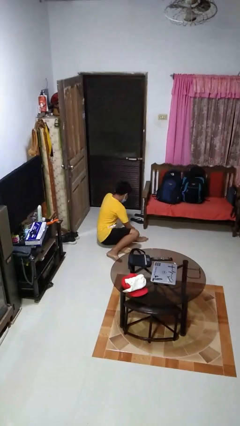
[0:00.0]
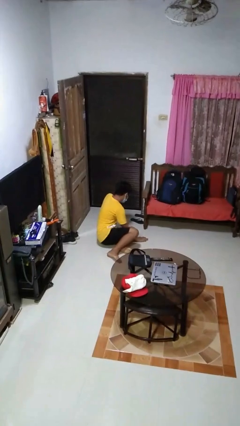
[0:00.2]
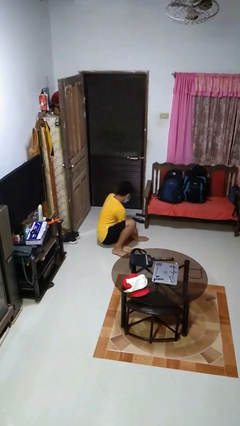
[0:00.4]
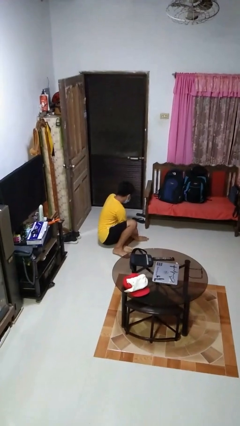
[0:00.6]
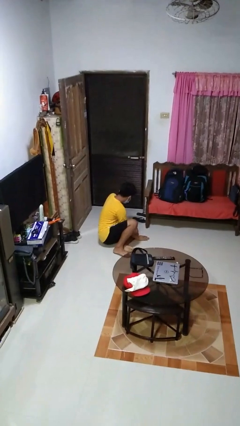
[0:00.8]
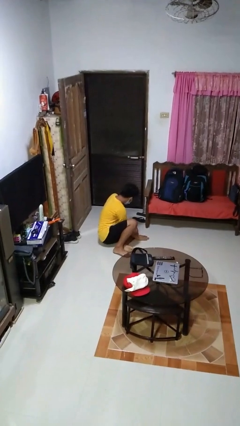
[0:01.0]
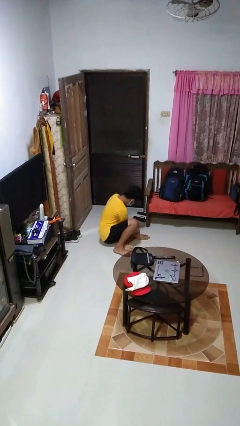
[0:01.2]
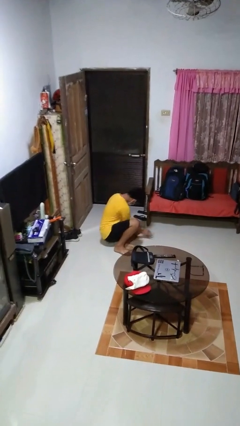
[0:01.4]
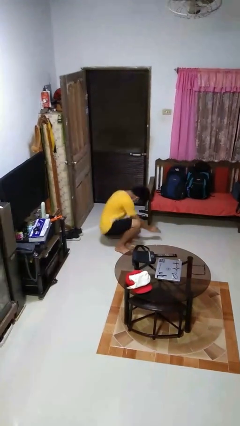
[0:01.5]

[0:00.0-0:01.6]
person lies down on floor

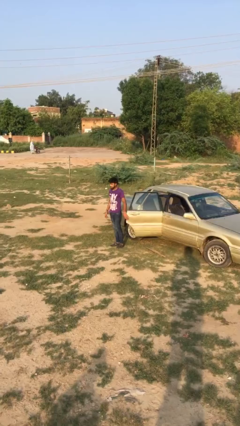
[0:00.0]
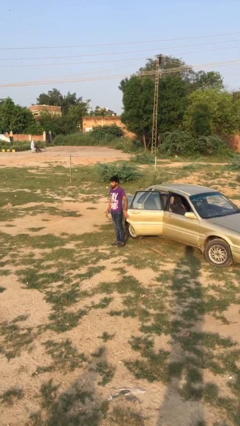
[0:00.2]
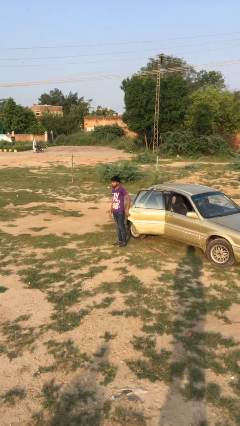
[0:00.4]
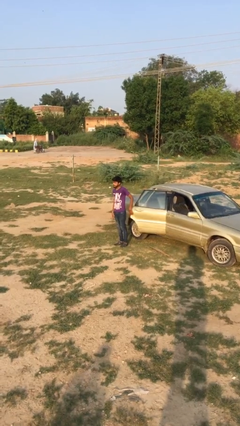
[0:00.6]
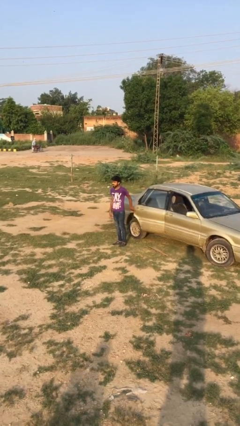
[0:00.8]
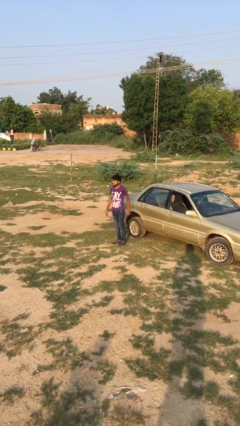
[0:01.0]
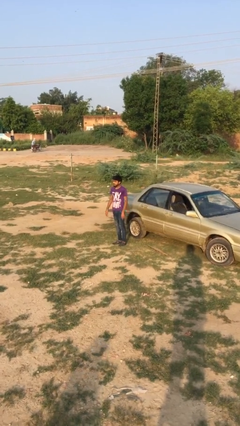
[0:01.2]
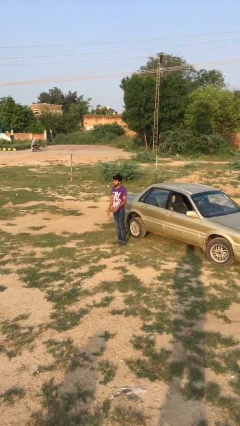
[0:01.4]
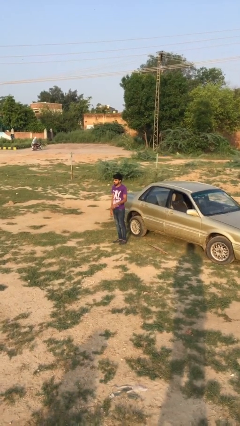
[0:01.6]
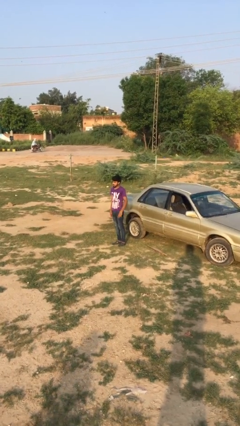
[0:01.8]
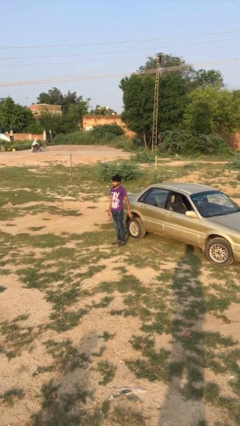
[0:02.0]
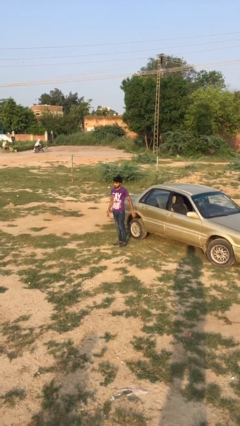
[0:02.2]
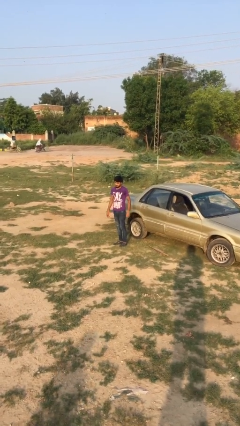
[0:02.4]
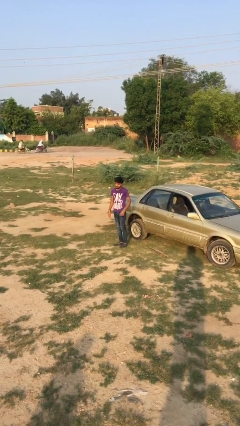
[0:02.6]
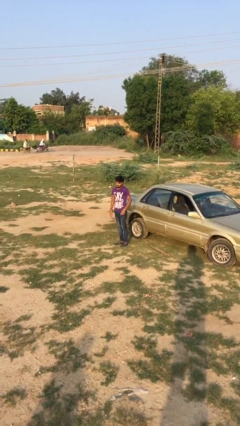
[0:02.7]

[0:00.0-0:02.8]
person closes car door

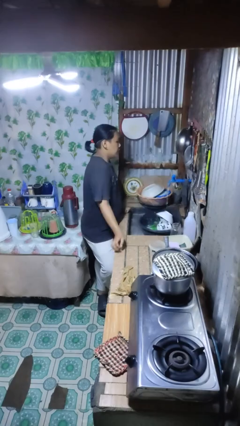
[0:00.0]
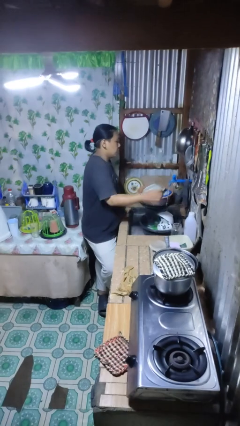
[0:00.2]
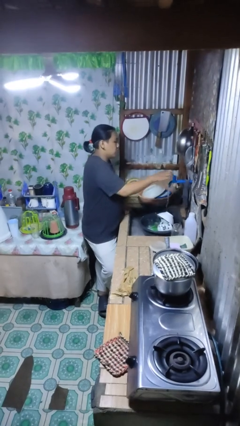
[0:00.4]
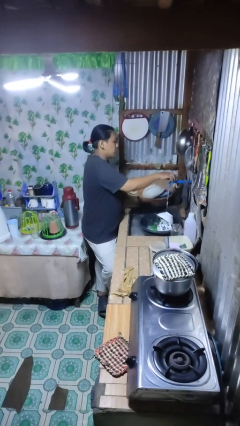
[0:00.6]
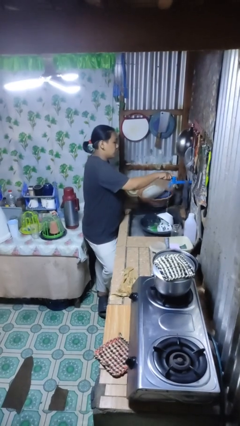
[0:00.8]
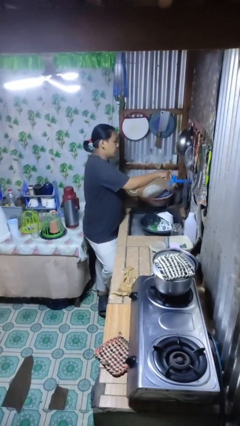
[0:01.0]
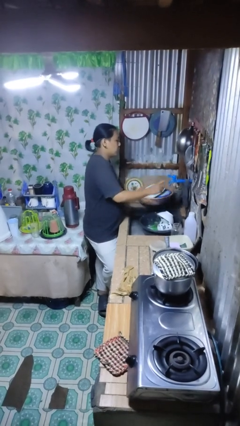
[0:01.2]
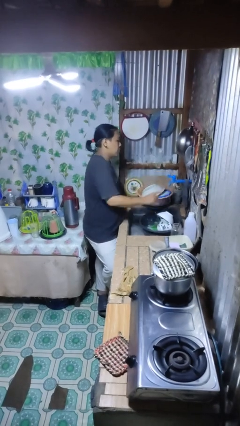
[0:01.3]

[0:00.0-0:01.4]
person turns off faucet

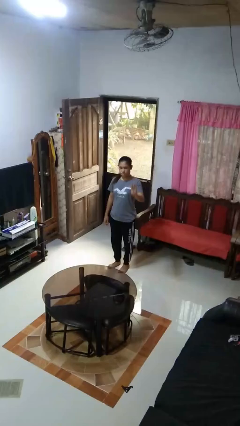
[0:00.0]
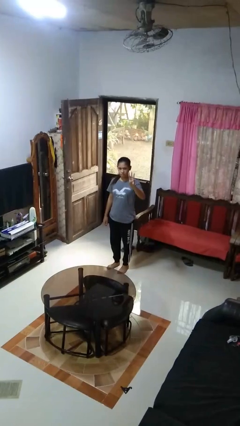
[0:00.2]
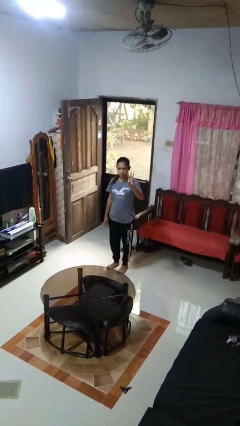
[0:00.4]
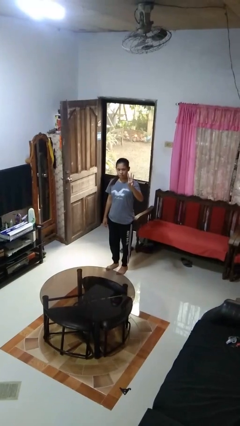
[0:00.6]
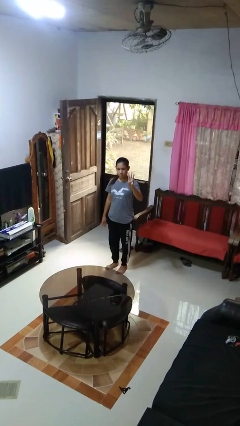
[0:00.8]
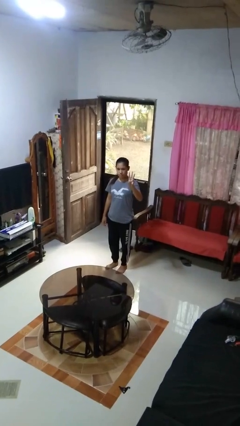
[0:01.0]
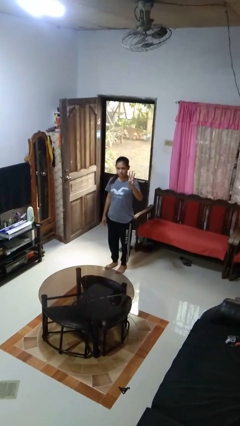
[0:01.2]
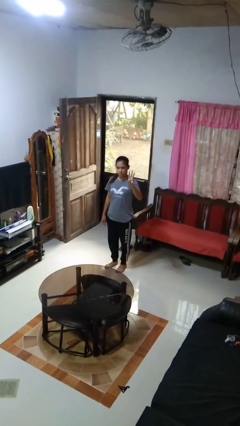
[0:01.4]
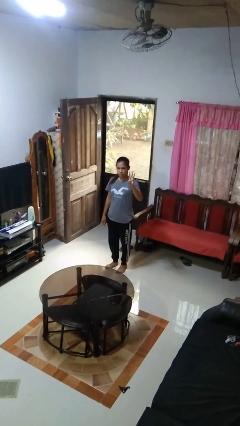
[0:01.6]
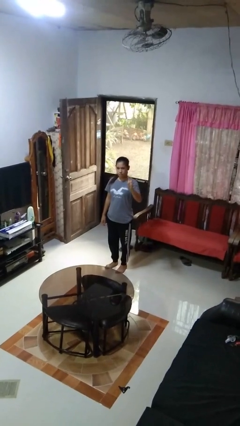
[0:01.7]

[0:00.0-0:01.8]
person gestures number three

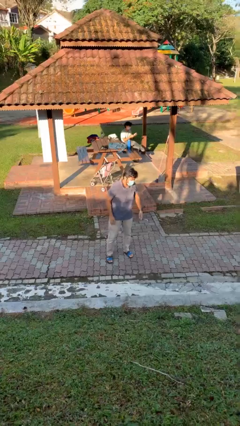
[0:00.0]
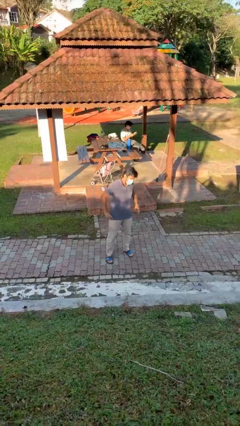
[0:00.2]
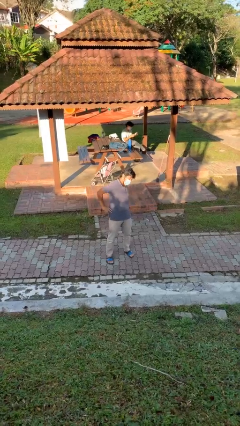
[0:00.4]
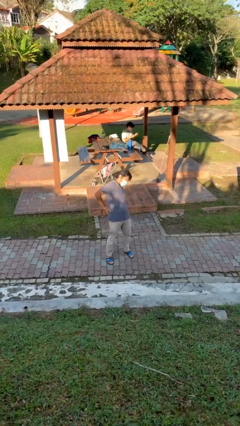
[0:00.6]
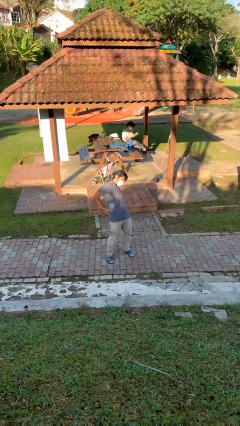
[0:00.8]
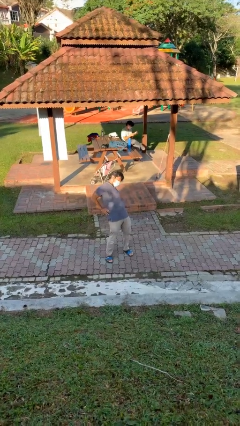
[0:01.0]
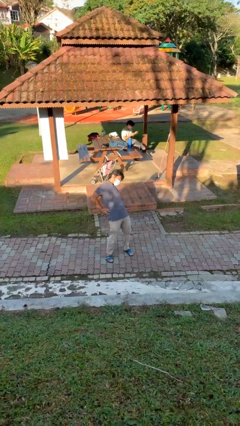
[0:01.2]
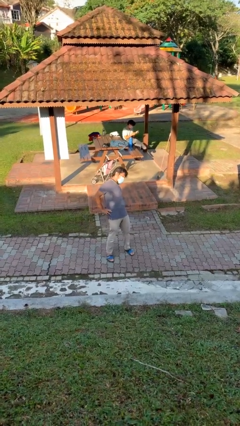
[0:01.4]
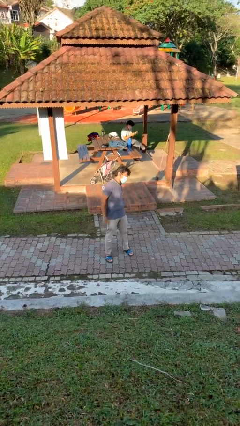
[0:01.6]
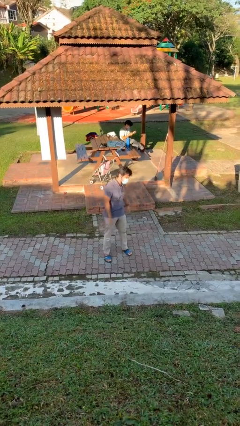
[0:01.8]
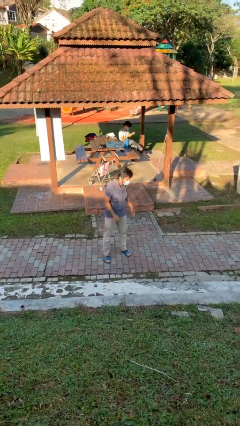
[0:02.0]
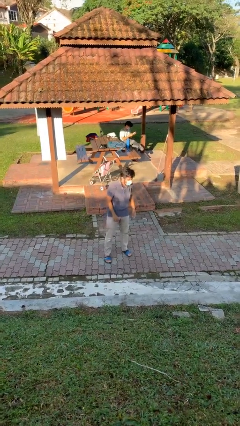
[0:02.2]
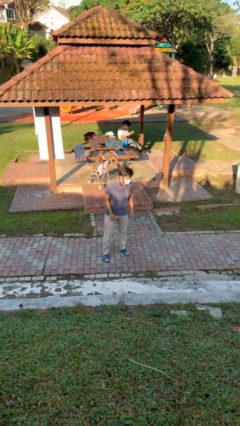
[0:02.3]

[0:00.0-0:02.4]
person stretches back

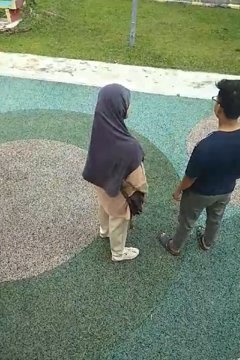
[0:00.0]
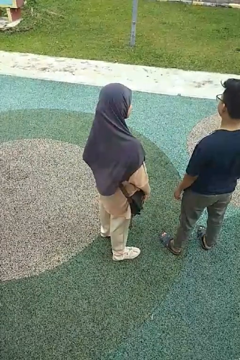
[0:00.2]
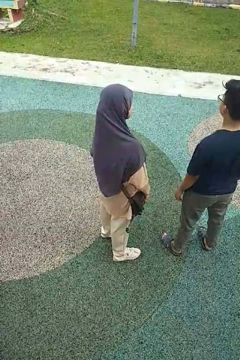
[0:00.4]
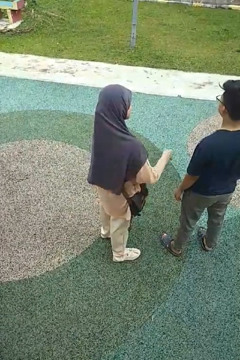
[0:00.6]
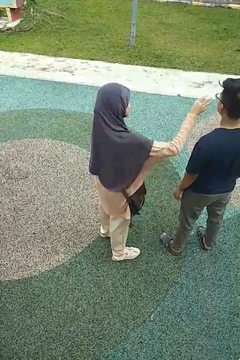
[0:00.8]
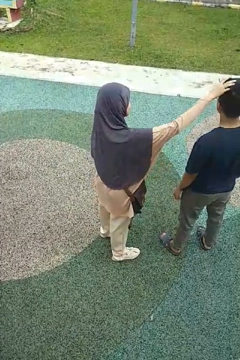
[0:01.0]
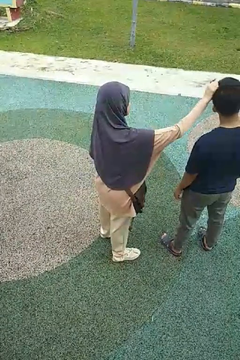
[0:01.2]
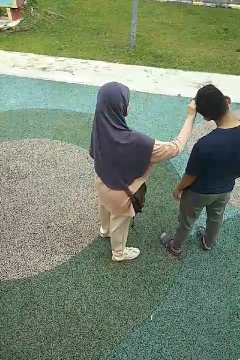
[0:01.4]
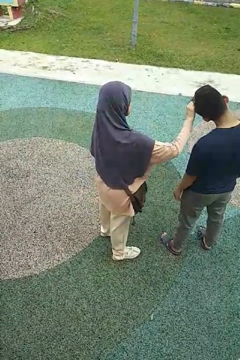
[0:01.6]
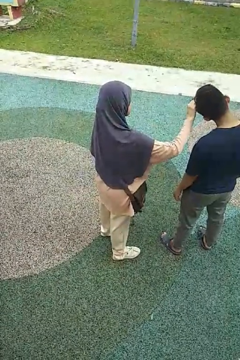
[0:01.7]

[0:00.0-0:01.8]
person grabs person by hair

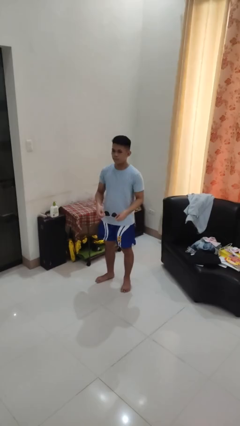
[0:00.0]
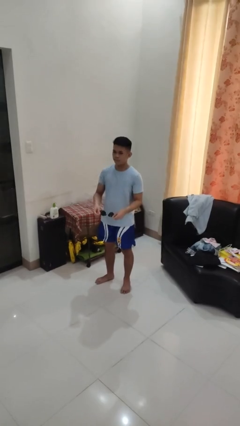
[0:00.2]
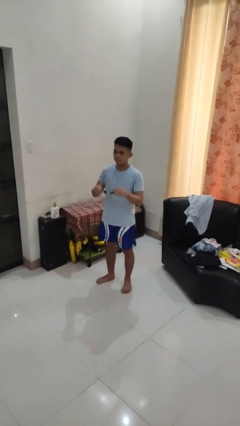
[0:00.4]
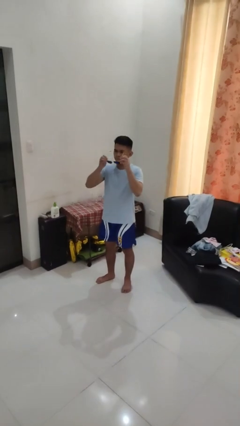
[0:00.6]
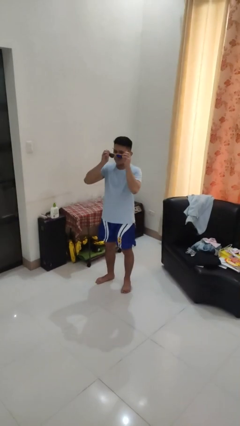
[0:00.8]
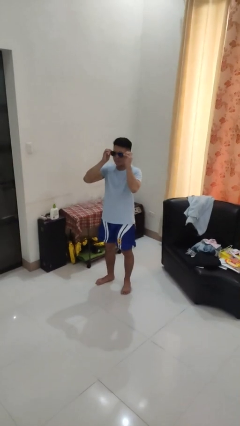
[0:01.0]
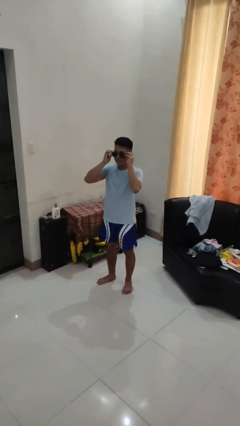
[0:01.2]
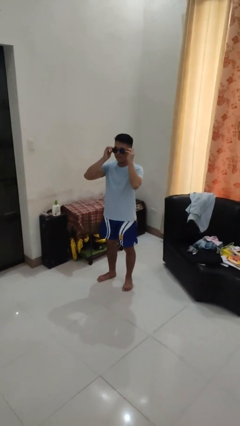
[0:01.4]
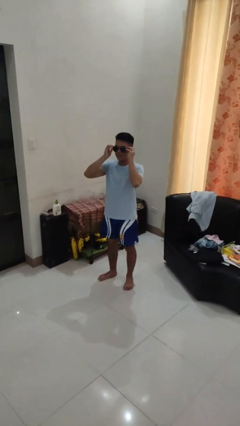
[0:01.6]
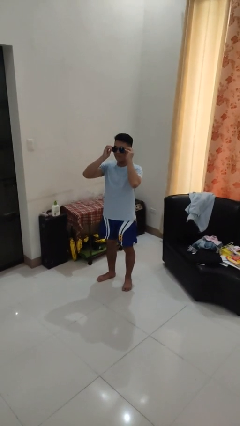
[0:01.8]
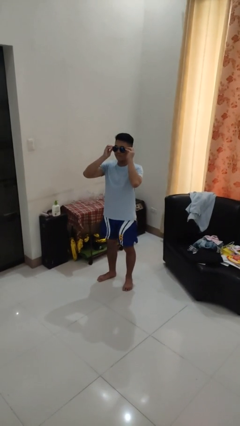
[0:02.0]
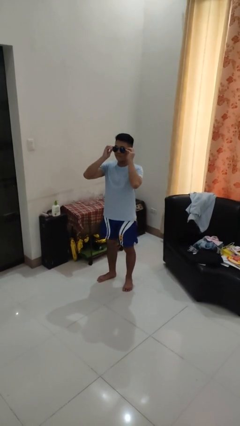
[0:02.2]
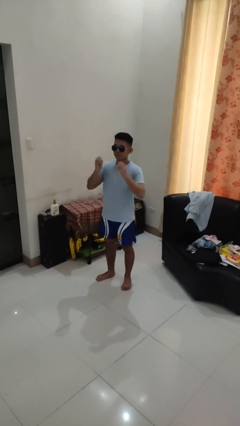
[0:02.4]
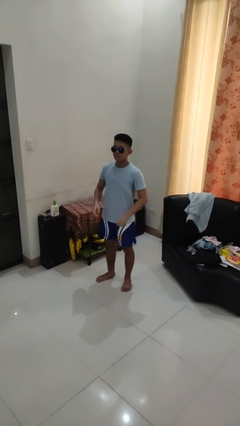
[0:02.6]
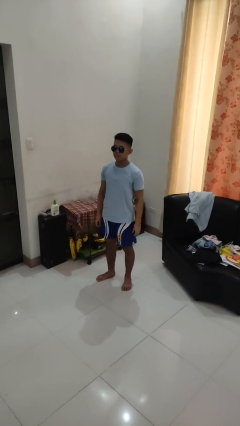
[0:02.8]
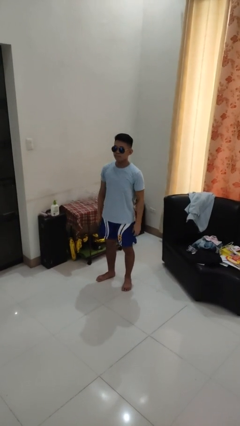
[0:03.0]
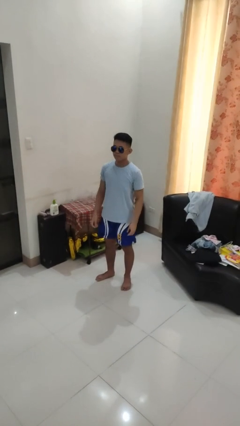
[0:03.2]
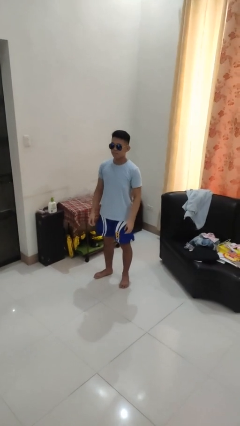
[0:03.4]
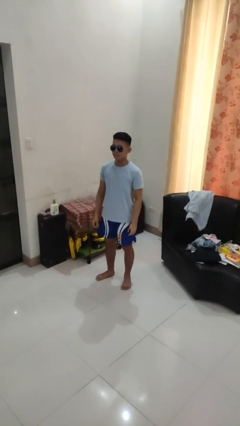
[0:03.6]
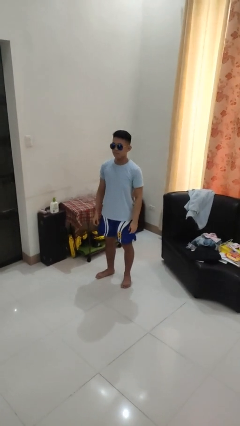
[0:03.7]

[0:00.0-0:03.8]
person puts on sunglasses

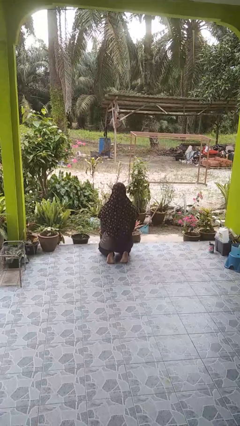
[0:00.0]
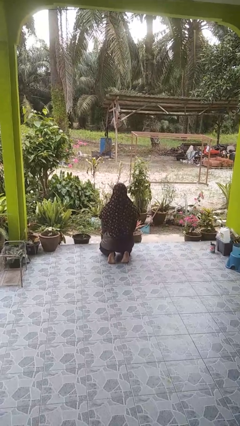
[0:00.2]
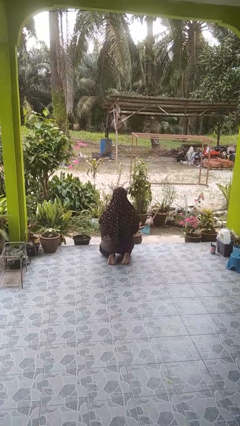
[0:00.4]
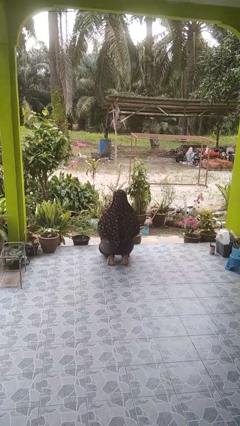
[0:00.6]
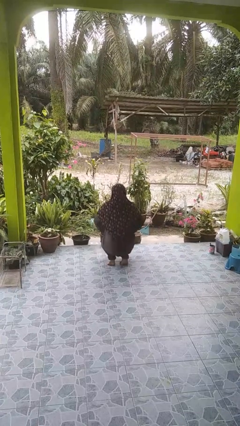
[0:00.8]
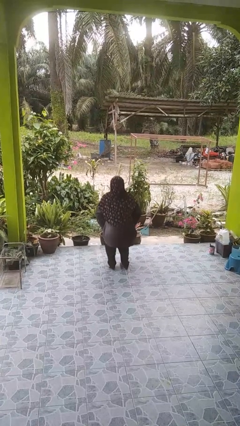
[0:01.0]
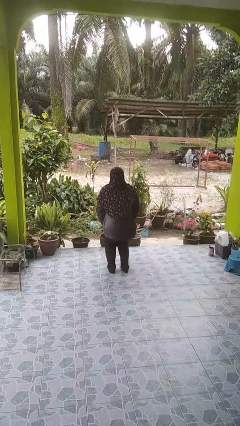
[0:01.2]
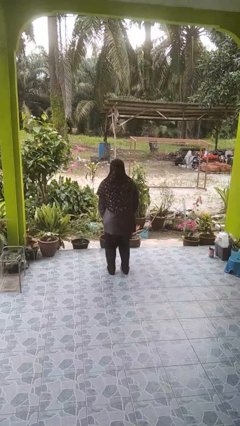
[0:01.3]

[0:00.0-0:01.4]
person stands up from floor

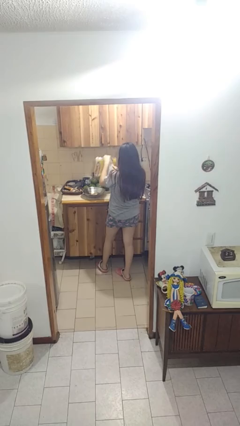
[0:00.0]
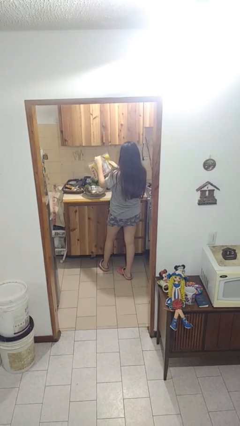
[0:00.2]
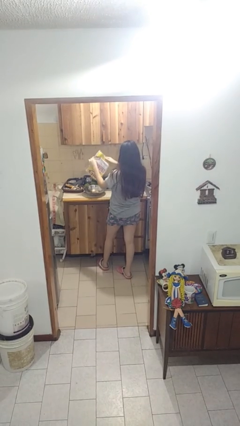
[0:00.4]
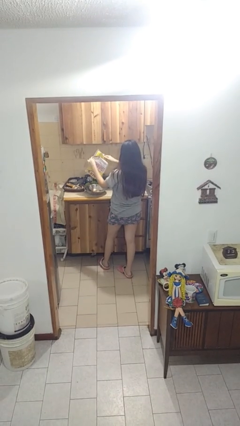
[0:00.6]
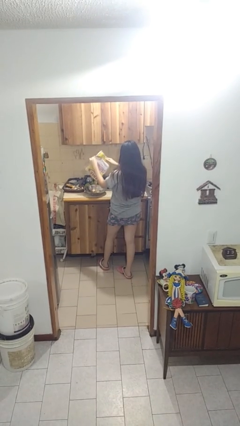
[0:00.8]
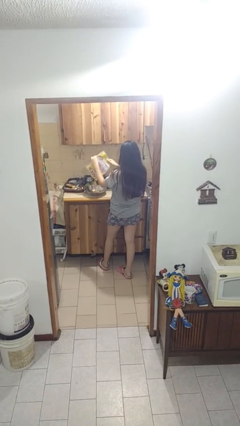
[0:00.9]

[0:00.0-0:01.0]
person pours into bowl
